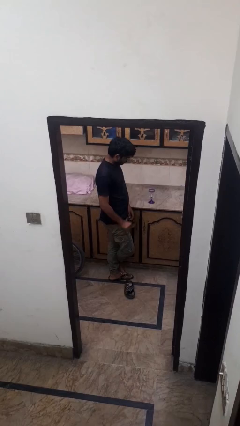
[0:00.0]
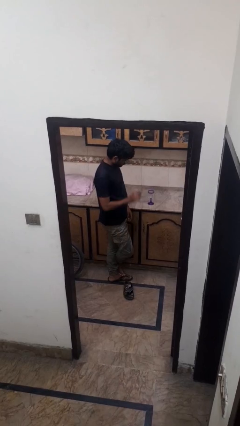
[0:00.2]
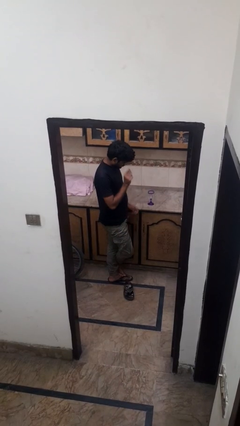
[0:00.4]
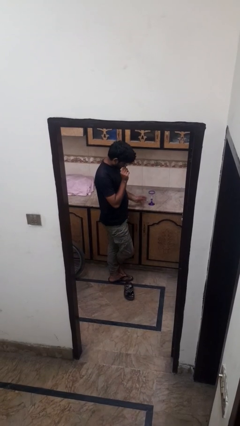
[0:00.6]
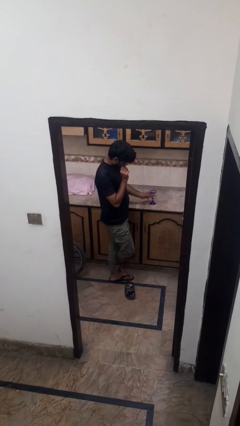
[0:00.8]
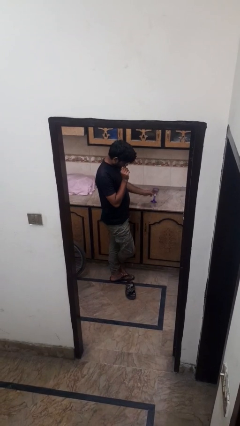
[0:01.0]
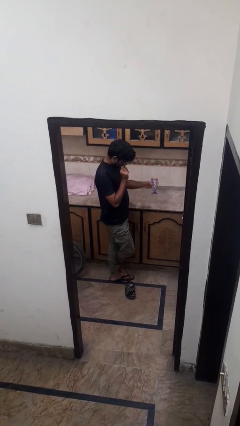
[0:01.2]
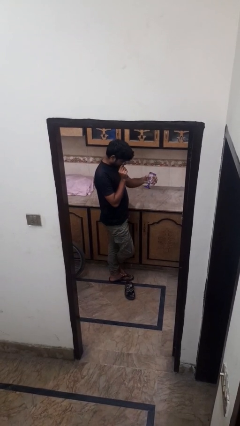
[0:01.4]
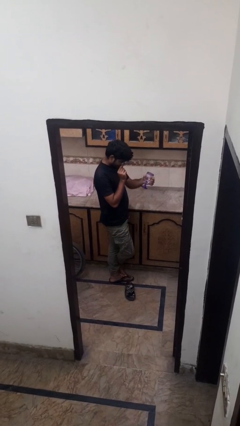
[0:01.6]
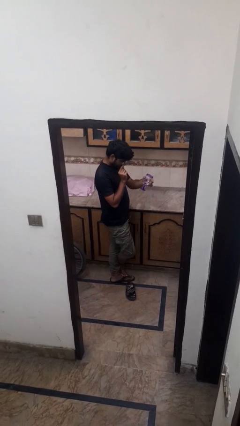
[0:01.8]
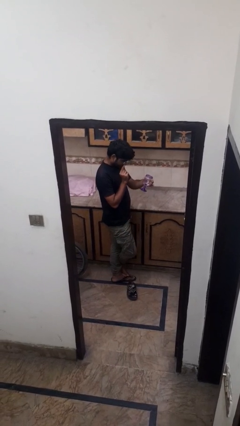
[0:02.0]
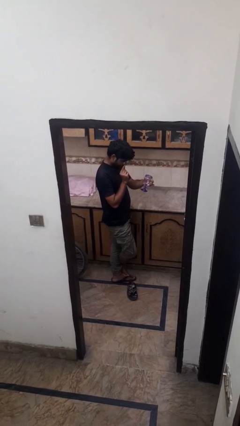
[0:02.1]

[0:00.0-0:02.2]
person picks up object from countertop

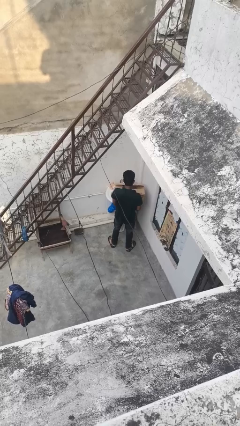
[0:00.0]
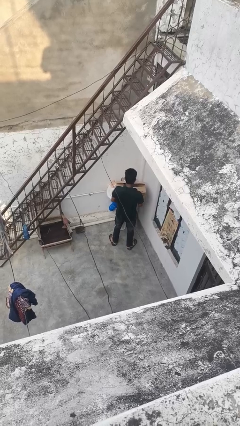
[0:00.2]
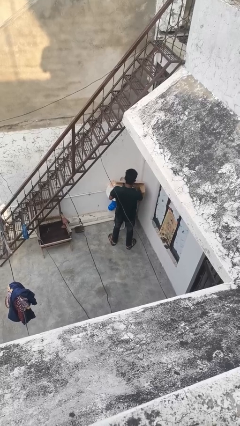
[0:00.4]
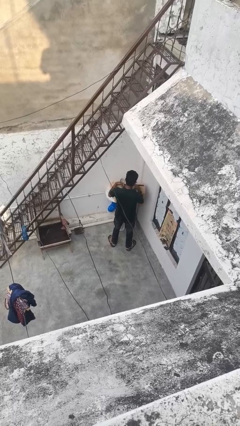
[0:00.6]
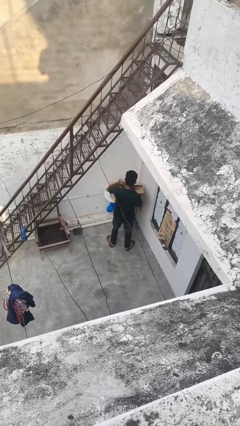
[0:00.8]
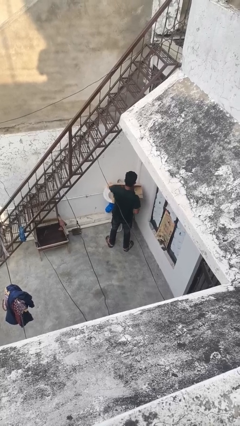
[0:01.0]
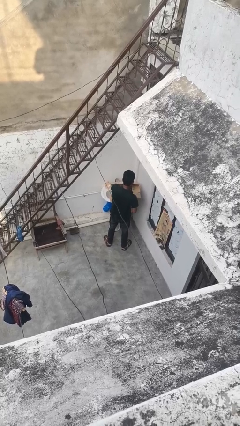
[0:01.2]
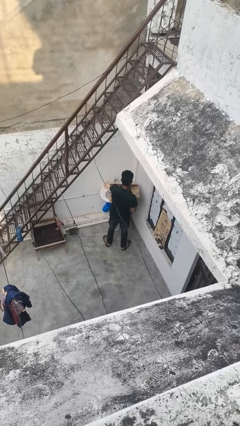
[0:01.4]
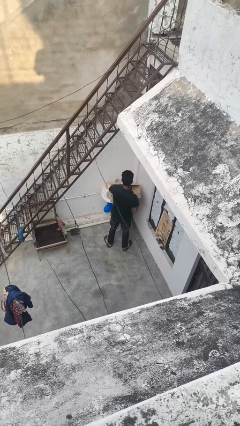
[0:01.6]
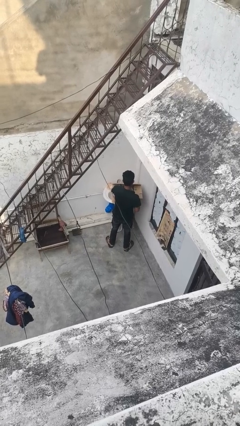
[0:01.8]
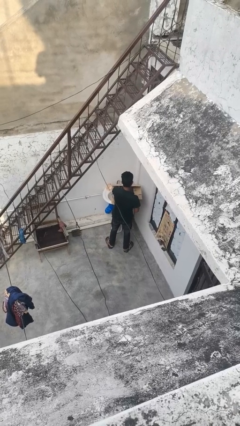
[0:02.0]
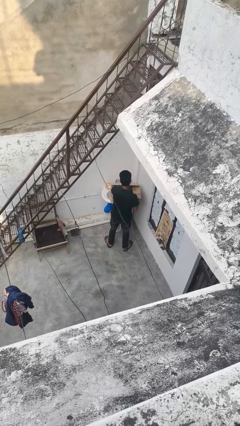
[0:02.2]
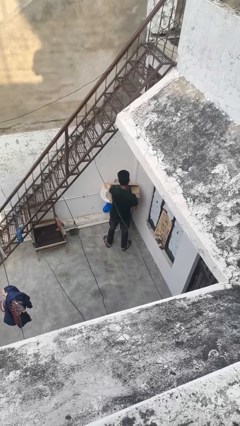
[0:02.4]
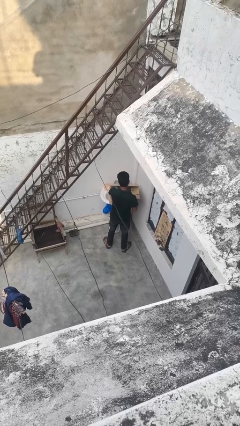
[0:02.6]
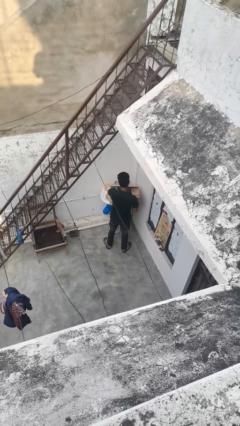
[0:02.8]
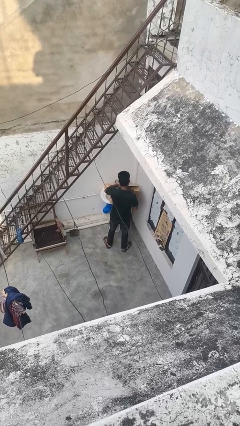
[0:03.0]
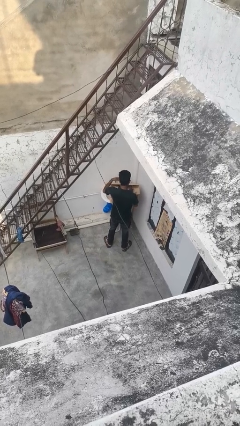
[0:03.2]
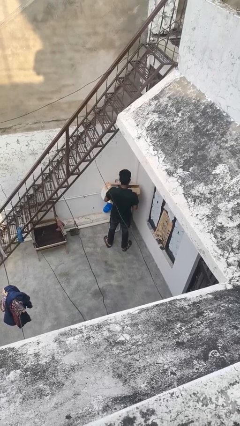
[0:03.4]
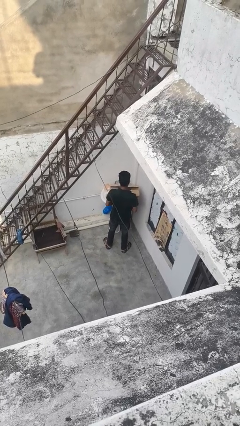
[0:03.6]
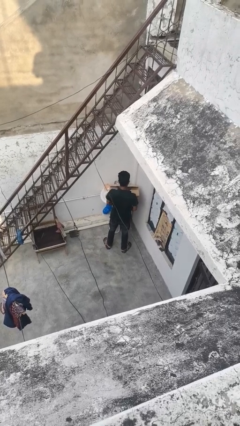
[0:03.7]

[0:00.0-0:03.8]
person searches in box

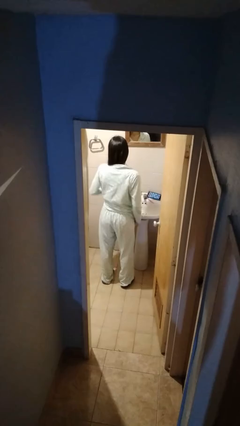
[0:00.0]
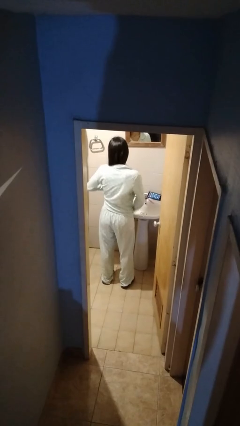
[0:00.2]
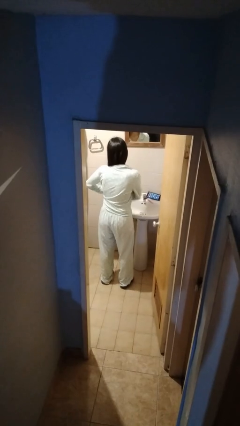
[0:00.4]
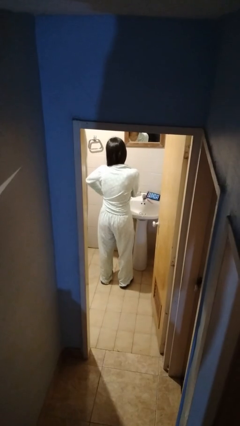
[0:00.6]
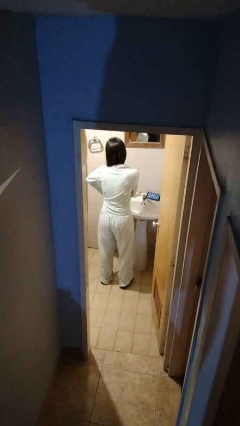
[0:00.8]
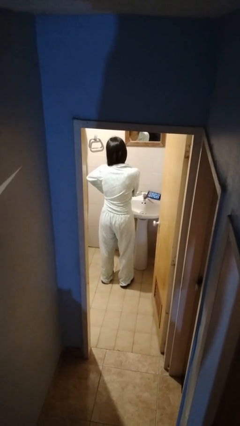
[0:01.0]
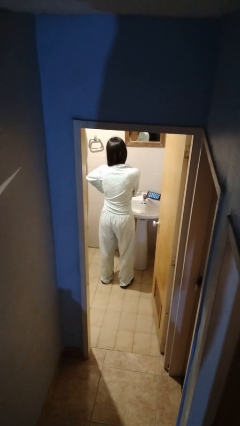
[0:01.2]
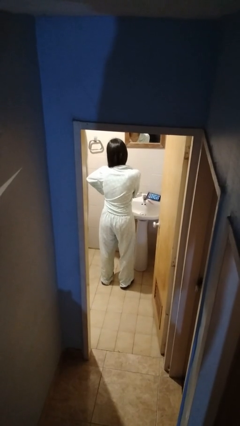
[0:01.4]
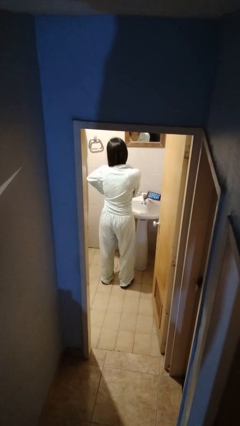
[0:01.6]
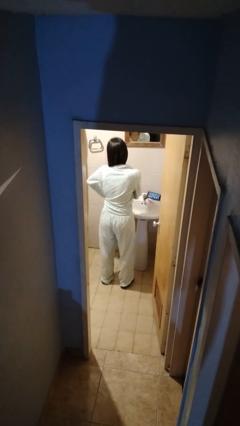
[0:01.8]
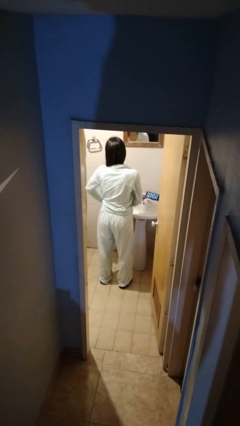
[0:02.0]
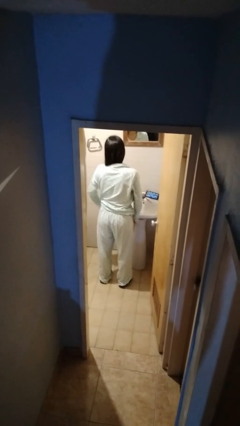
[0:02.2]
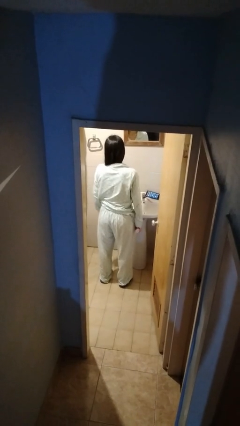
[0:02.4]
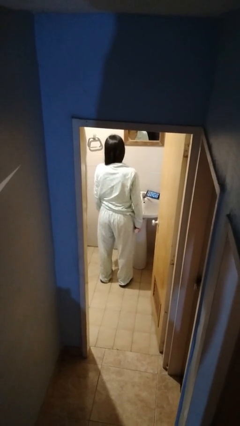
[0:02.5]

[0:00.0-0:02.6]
person applies deodorant

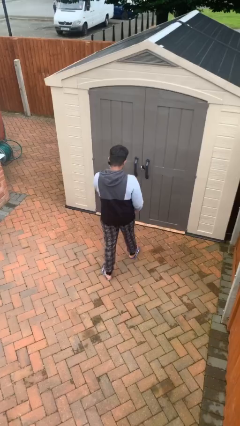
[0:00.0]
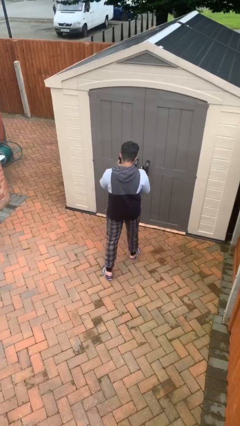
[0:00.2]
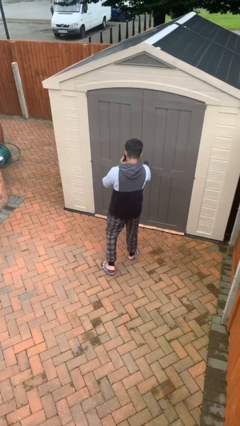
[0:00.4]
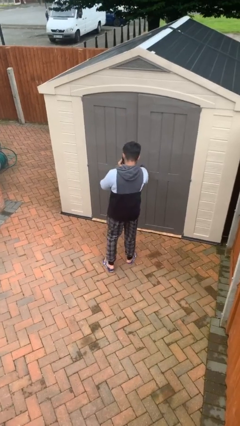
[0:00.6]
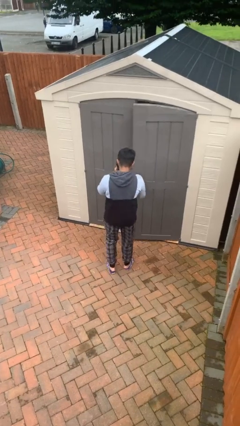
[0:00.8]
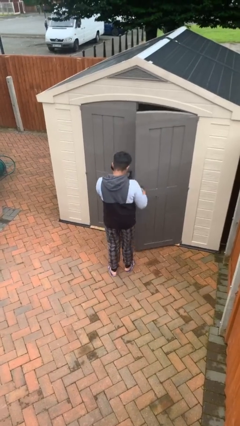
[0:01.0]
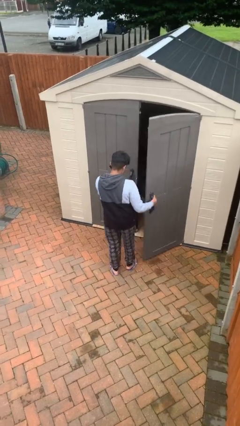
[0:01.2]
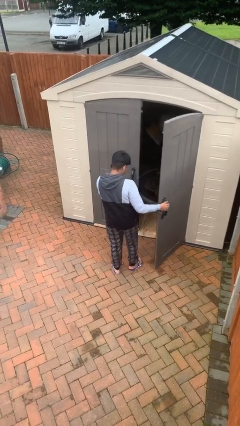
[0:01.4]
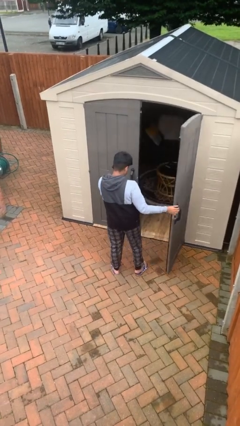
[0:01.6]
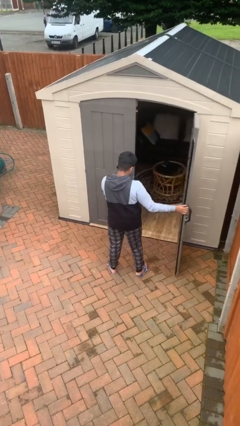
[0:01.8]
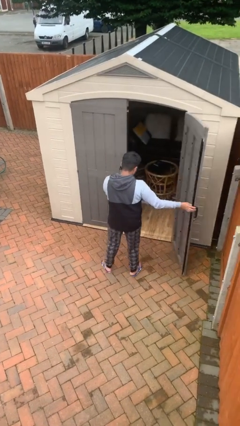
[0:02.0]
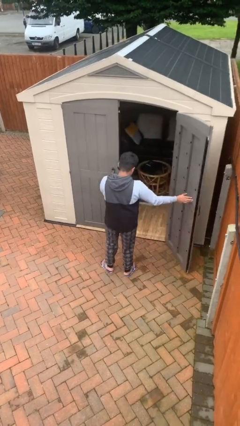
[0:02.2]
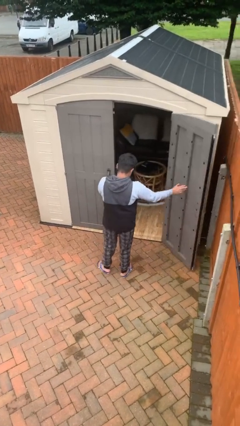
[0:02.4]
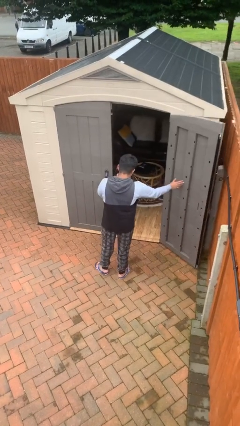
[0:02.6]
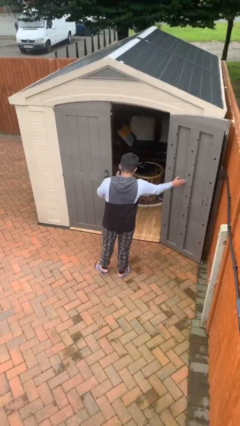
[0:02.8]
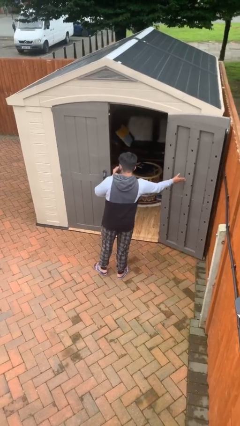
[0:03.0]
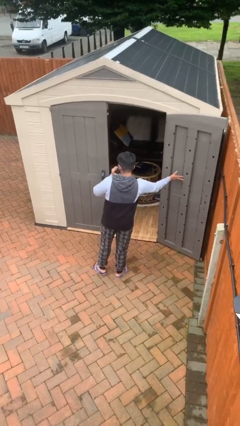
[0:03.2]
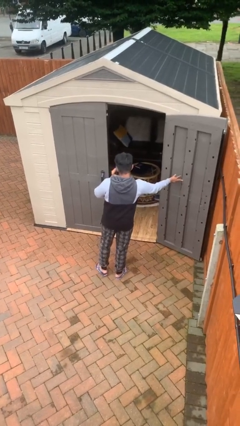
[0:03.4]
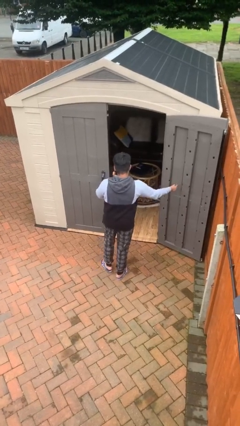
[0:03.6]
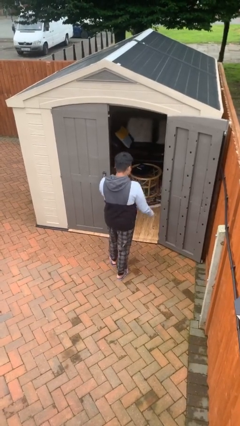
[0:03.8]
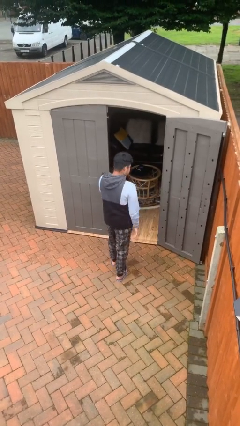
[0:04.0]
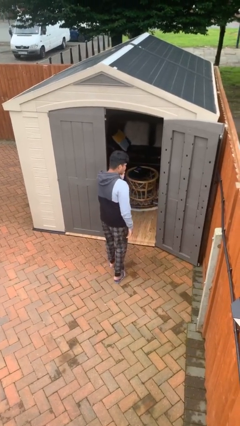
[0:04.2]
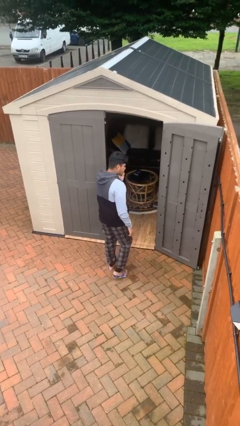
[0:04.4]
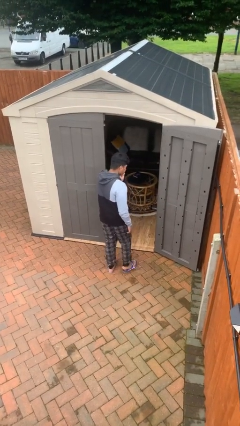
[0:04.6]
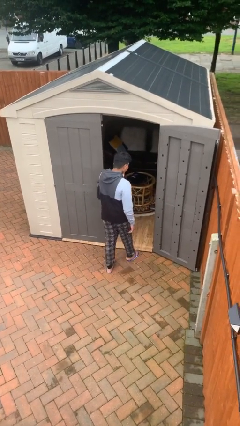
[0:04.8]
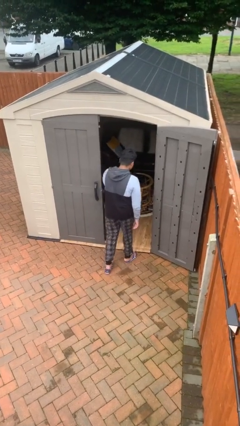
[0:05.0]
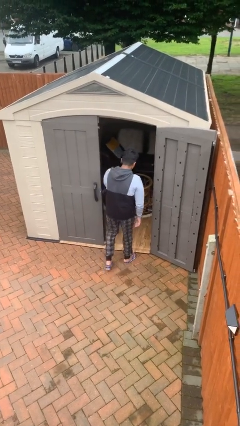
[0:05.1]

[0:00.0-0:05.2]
person opens facility door

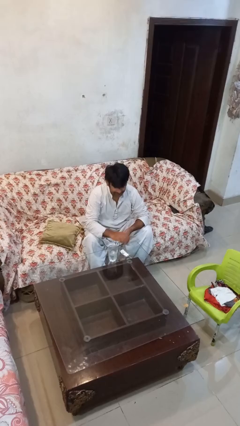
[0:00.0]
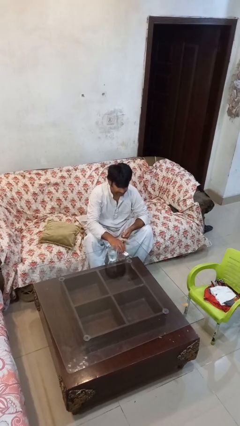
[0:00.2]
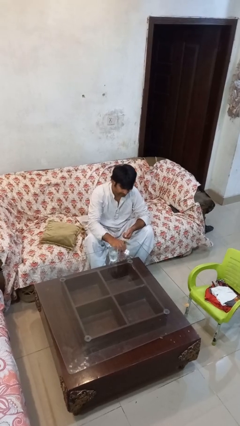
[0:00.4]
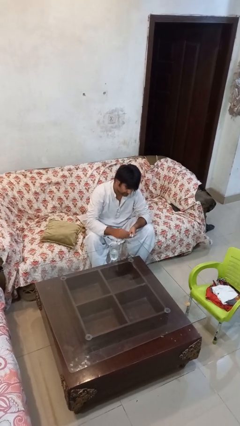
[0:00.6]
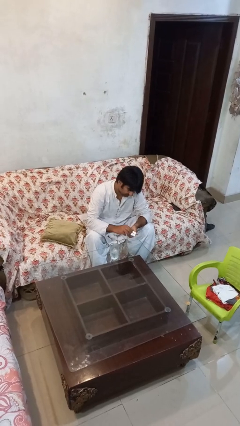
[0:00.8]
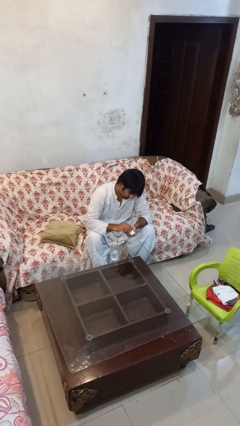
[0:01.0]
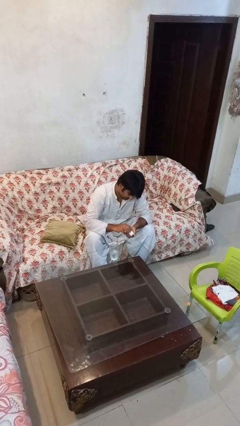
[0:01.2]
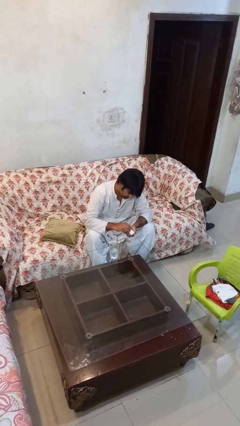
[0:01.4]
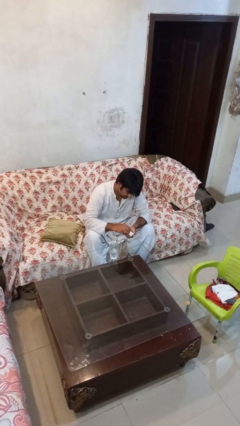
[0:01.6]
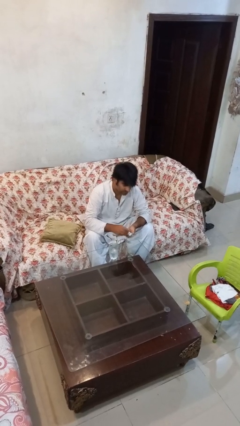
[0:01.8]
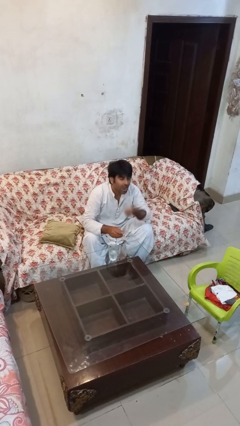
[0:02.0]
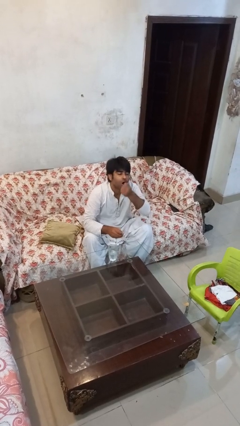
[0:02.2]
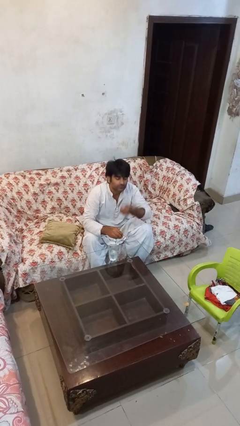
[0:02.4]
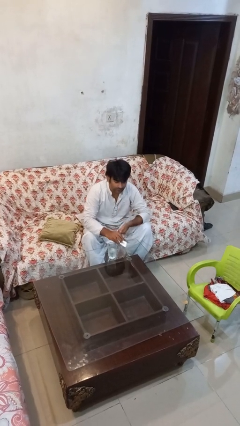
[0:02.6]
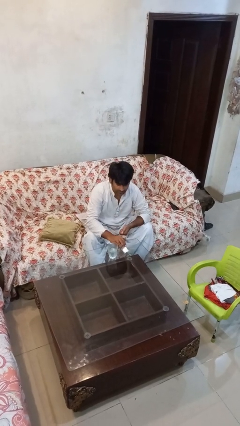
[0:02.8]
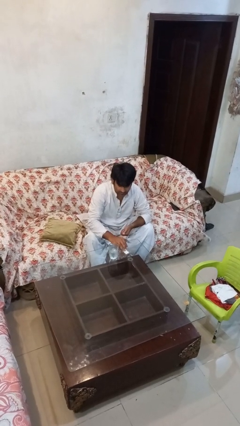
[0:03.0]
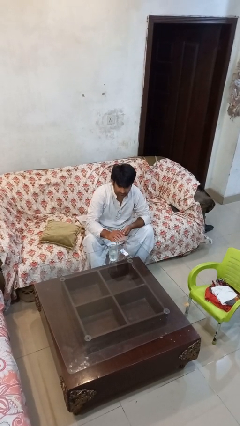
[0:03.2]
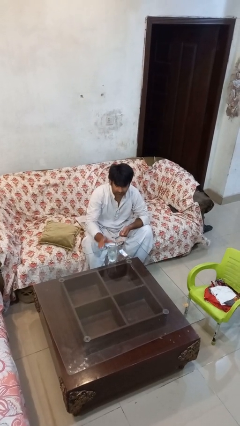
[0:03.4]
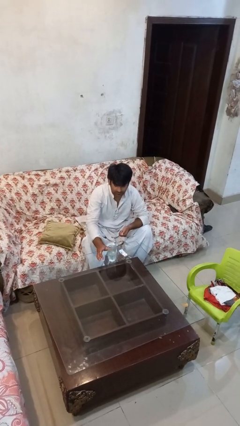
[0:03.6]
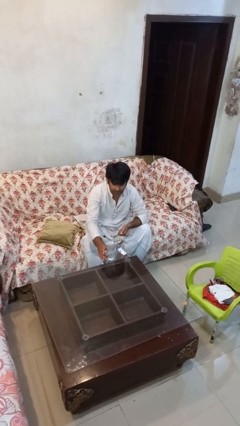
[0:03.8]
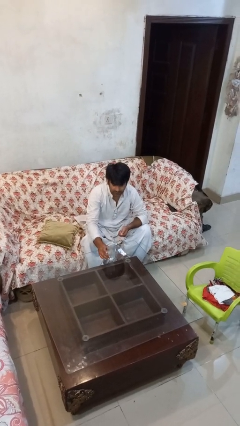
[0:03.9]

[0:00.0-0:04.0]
person takes medicine pills
